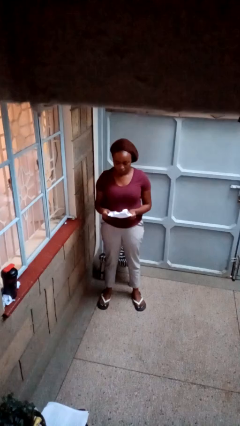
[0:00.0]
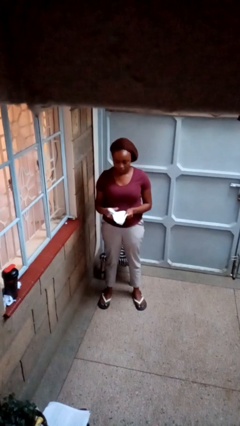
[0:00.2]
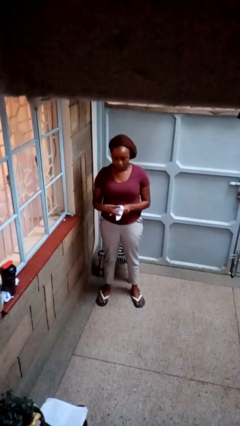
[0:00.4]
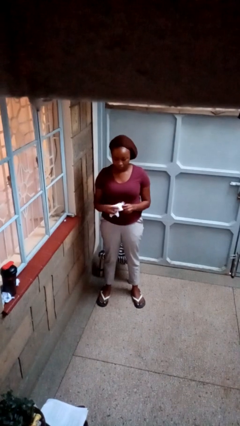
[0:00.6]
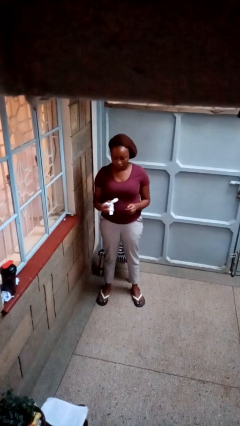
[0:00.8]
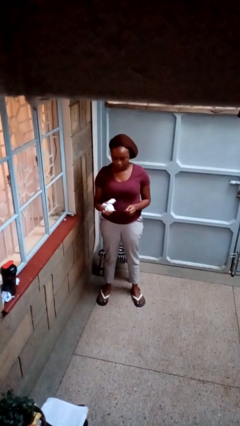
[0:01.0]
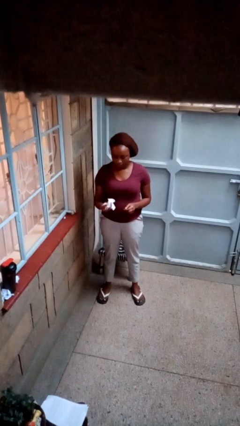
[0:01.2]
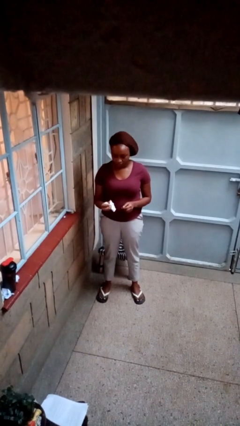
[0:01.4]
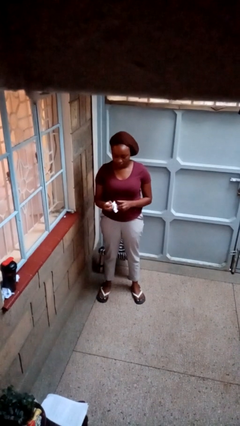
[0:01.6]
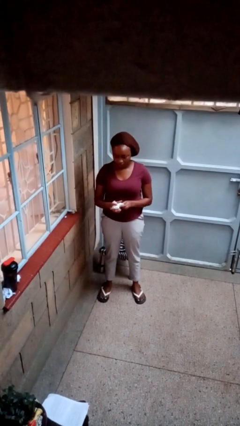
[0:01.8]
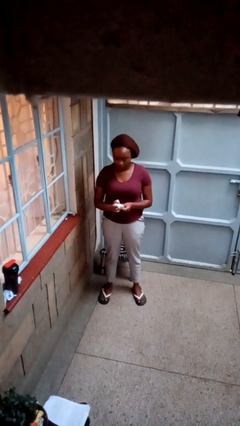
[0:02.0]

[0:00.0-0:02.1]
person crumples paper

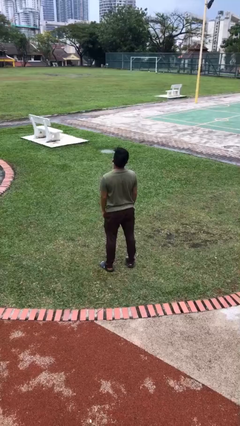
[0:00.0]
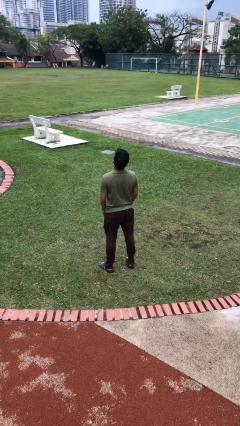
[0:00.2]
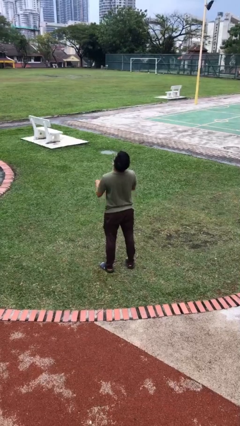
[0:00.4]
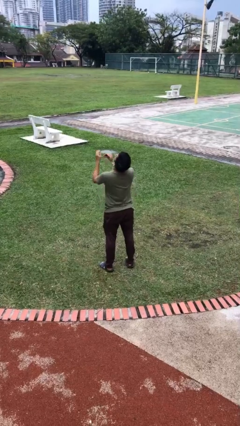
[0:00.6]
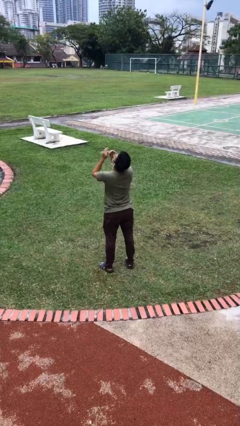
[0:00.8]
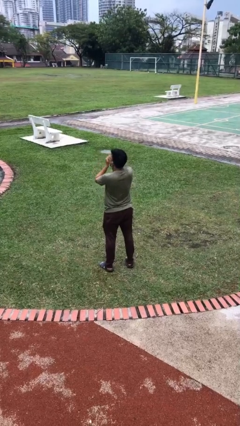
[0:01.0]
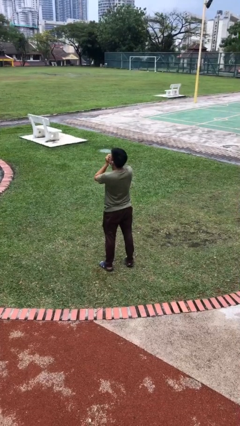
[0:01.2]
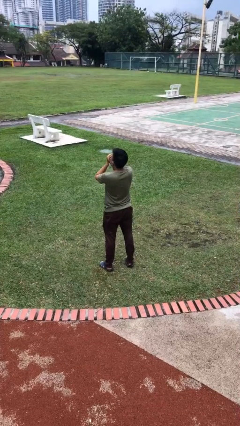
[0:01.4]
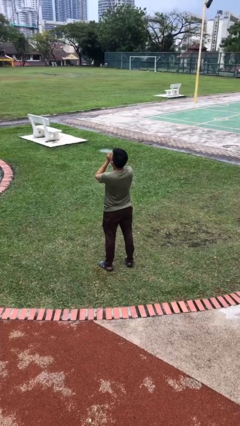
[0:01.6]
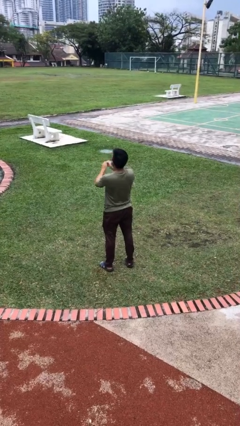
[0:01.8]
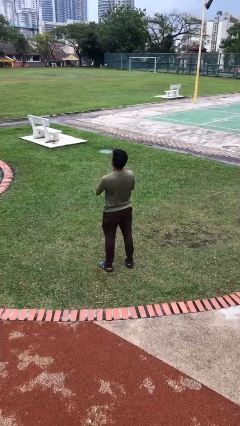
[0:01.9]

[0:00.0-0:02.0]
person sneezes into hand

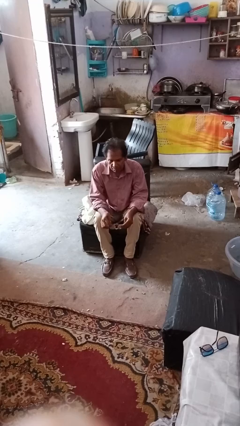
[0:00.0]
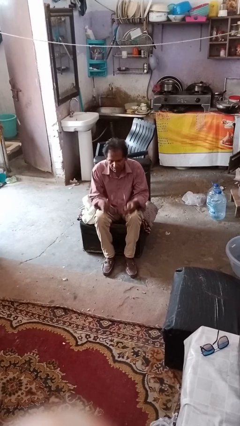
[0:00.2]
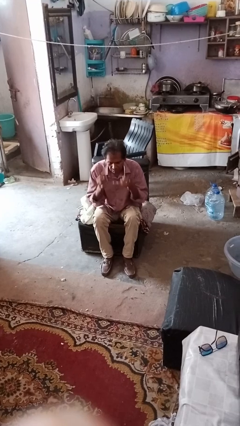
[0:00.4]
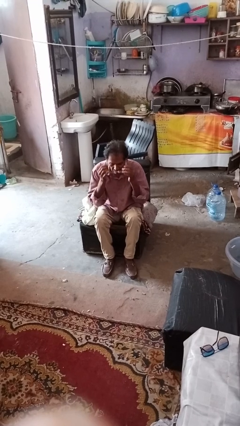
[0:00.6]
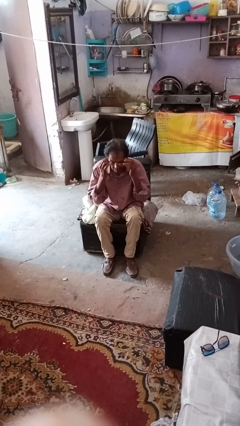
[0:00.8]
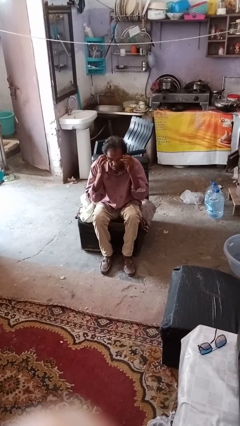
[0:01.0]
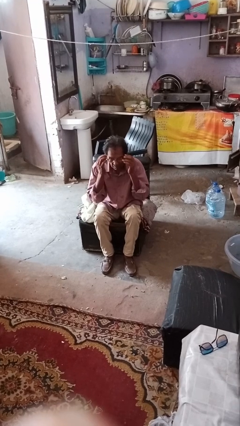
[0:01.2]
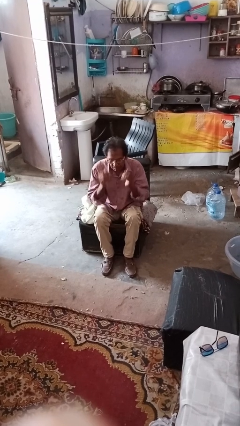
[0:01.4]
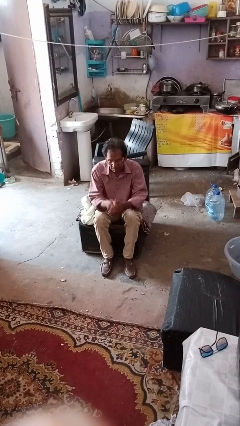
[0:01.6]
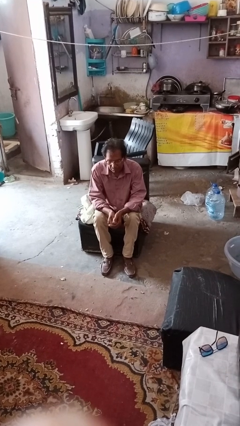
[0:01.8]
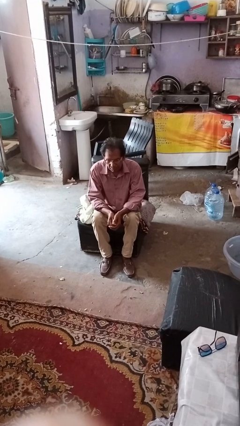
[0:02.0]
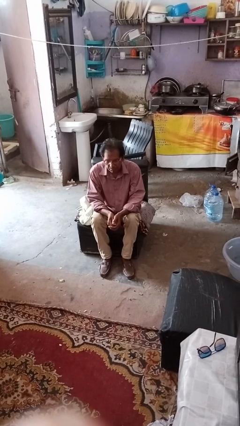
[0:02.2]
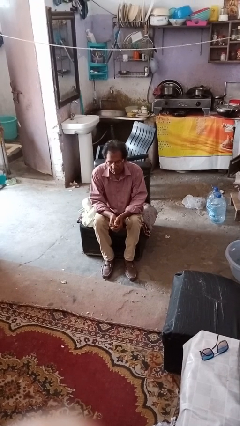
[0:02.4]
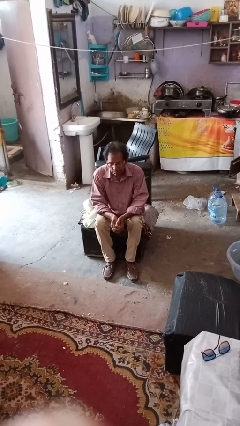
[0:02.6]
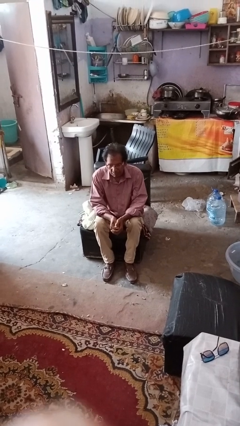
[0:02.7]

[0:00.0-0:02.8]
person puts on glasses

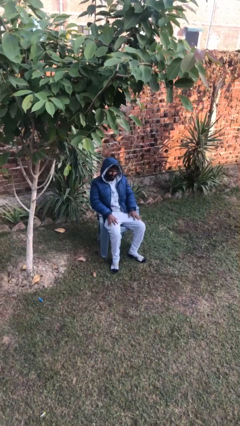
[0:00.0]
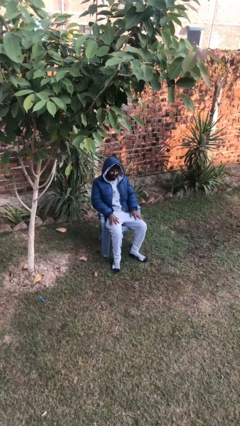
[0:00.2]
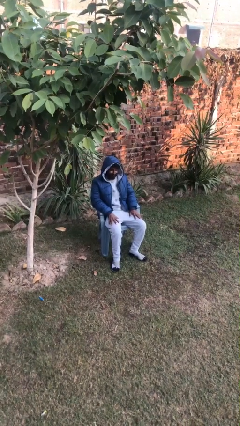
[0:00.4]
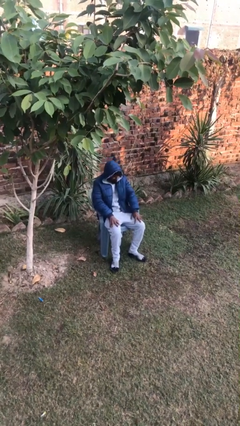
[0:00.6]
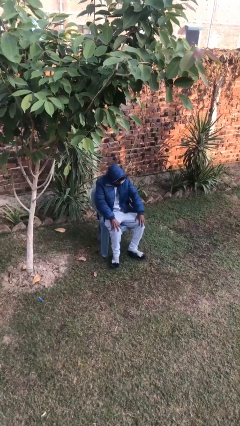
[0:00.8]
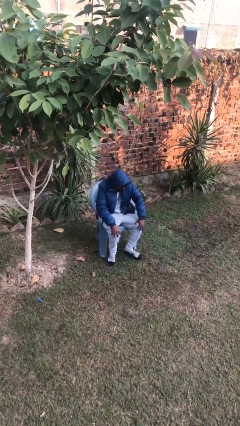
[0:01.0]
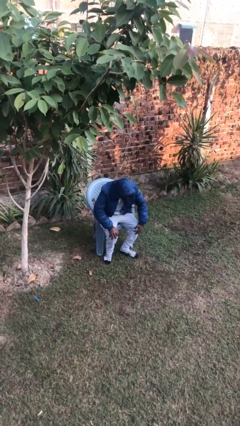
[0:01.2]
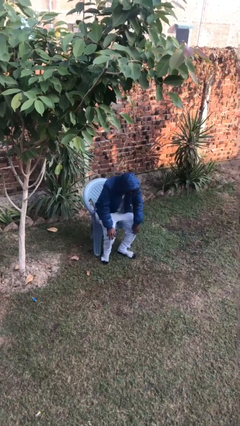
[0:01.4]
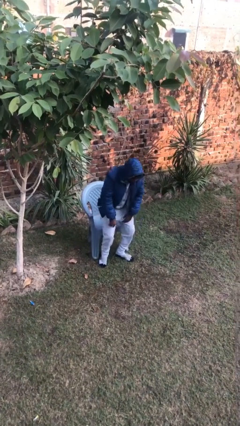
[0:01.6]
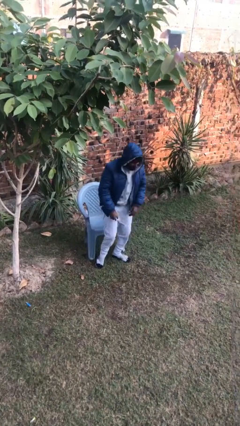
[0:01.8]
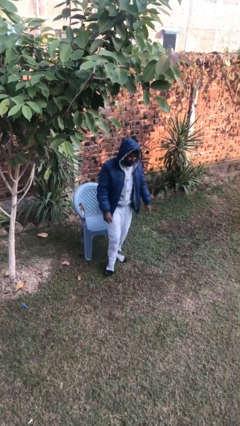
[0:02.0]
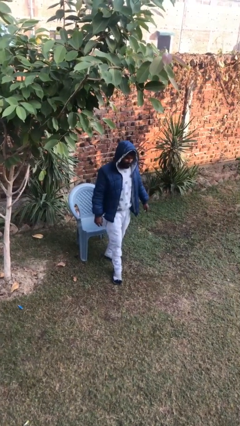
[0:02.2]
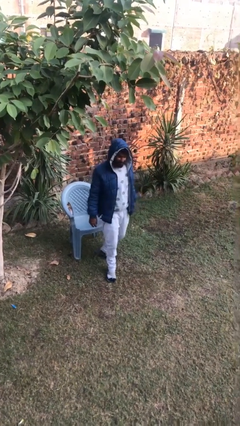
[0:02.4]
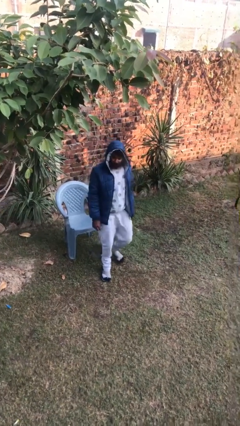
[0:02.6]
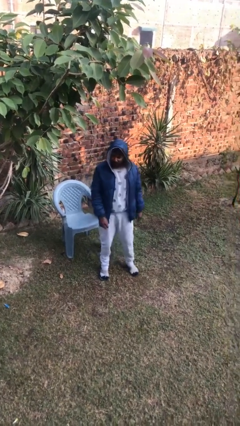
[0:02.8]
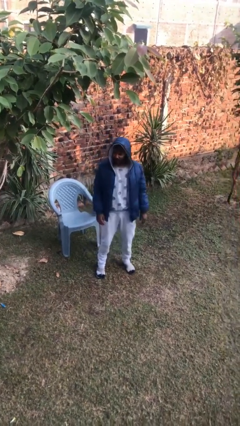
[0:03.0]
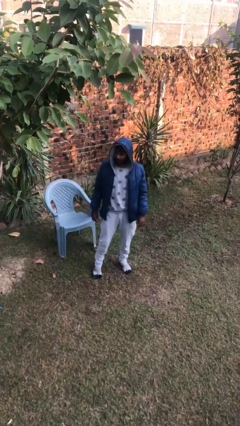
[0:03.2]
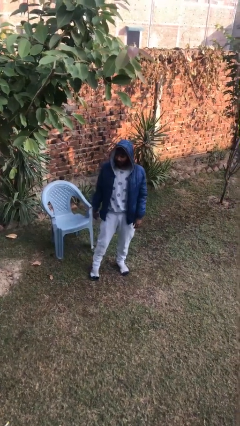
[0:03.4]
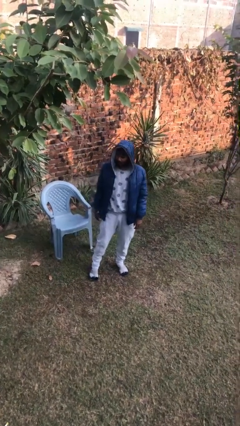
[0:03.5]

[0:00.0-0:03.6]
person stands up

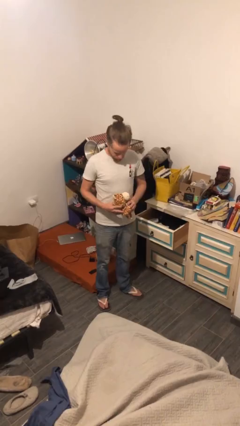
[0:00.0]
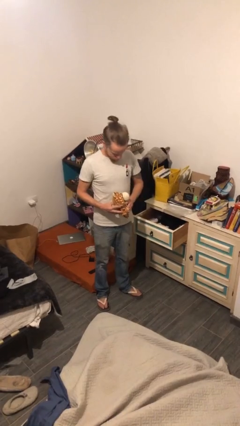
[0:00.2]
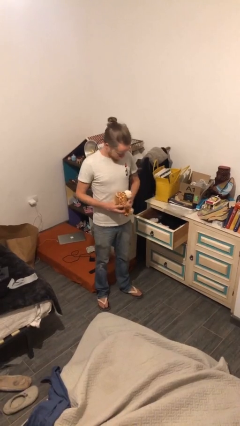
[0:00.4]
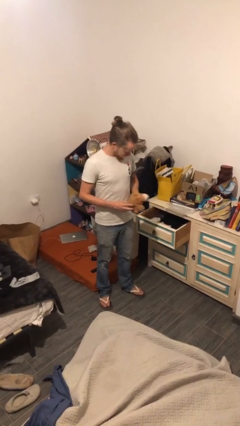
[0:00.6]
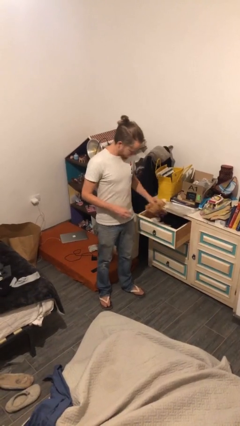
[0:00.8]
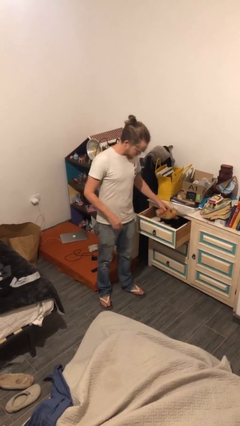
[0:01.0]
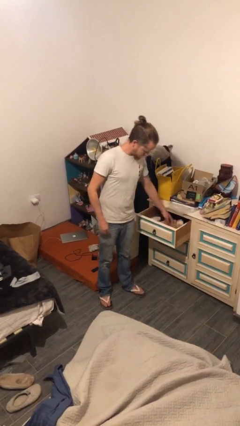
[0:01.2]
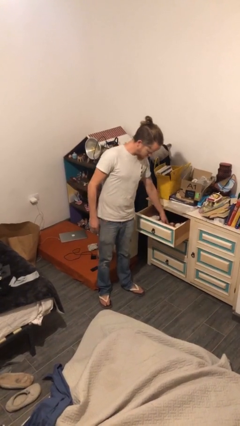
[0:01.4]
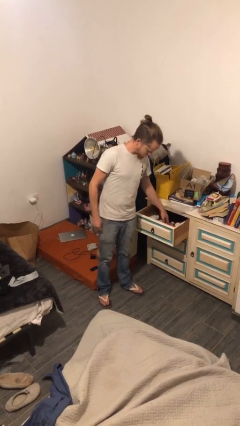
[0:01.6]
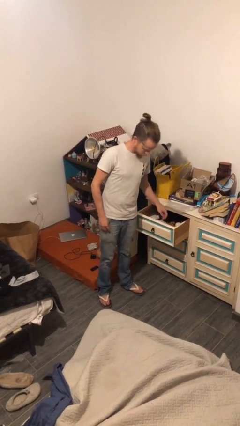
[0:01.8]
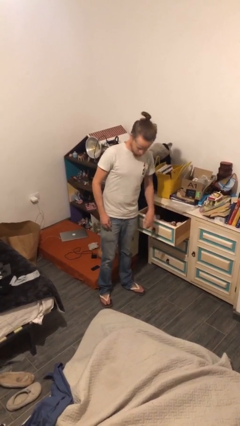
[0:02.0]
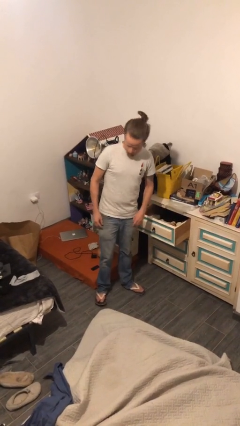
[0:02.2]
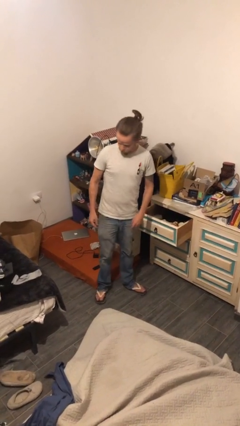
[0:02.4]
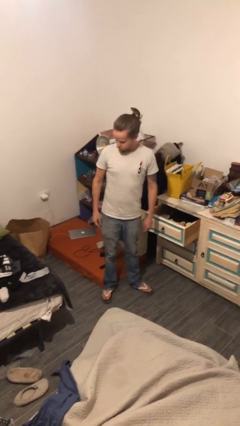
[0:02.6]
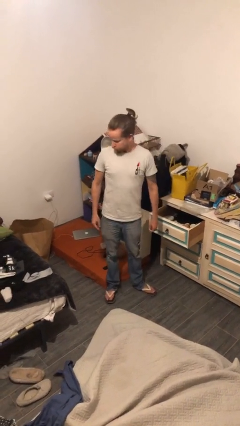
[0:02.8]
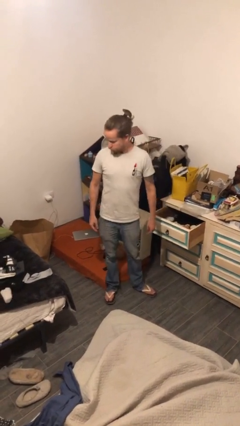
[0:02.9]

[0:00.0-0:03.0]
person puts down object into cabinet

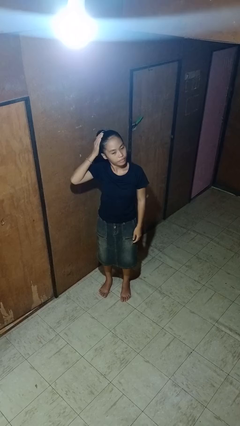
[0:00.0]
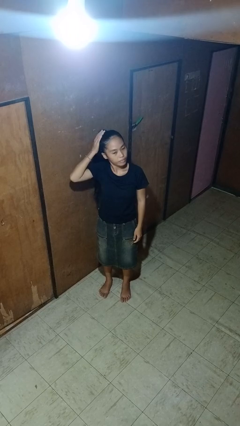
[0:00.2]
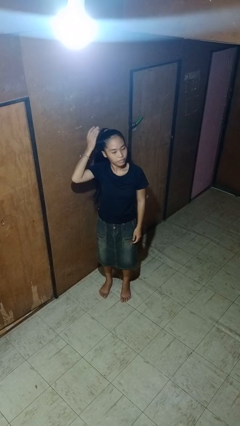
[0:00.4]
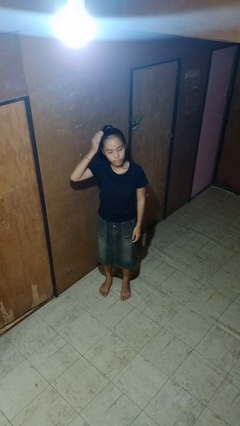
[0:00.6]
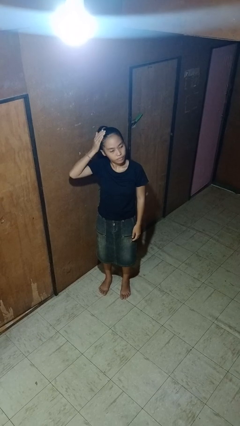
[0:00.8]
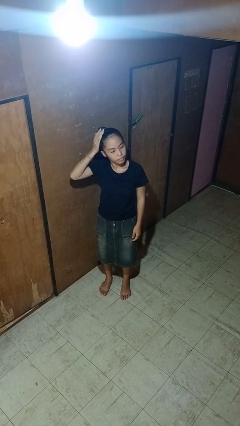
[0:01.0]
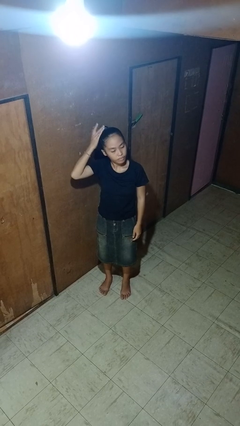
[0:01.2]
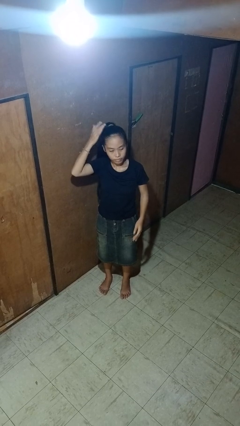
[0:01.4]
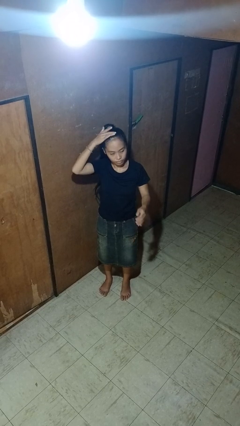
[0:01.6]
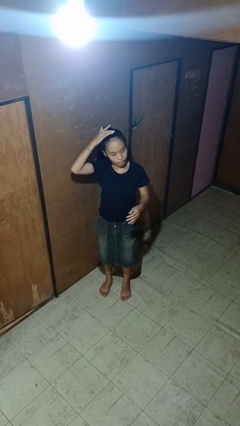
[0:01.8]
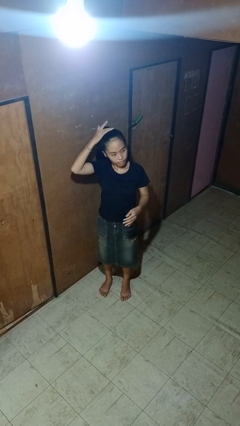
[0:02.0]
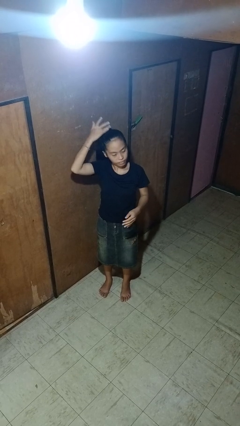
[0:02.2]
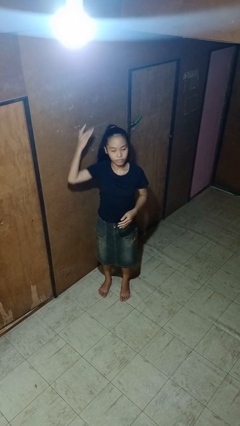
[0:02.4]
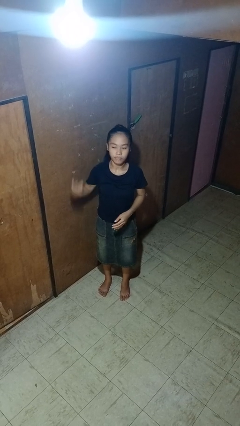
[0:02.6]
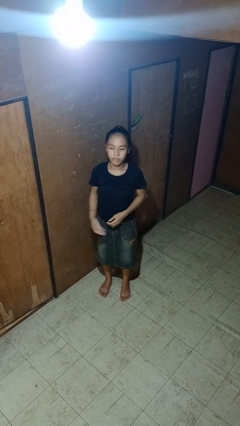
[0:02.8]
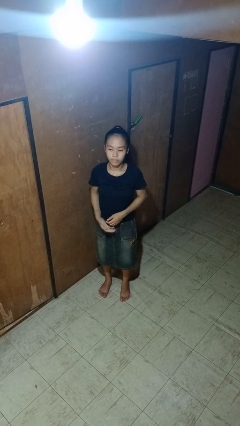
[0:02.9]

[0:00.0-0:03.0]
person strokes hair

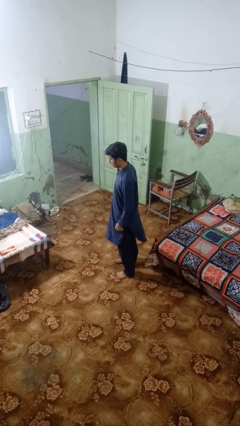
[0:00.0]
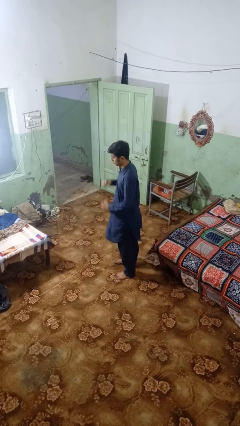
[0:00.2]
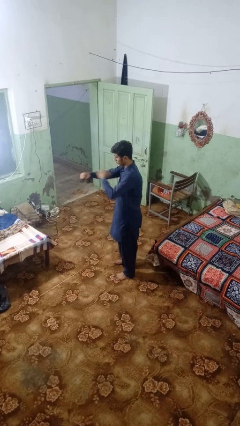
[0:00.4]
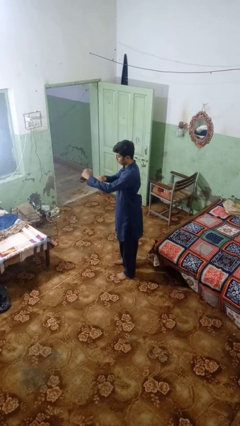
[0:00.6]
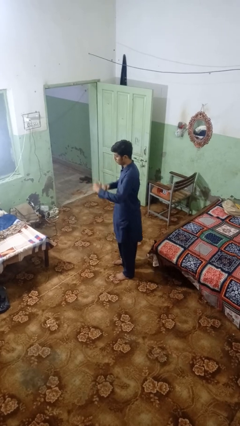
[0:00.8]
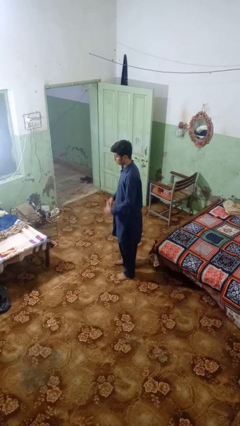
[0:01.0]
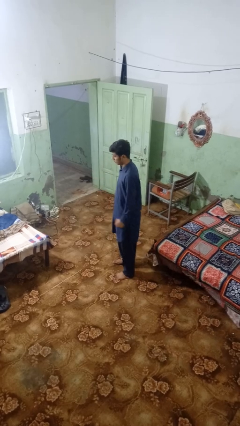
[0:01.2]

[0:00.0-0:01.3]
person karate chop
